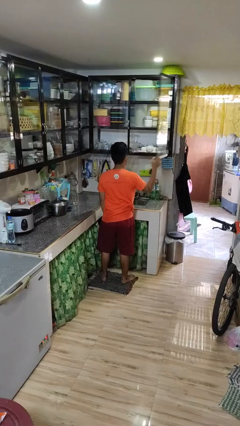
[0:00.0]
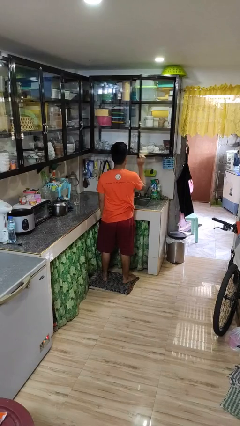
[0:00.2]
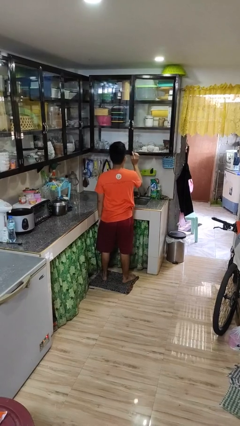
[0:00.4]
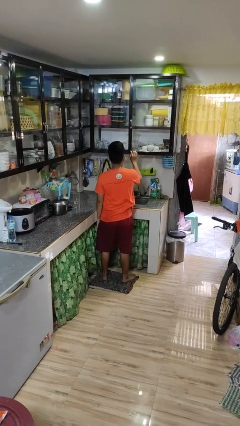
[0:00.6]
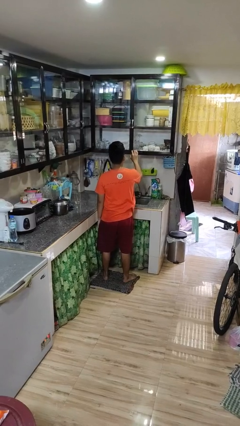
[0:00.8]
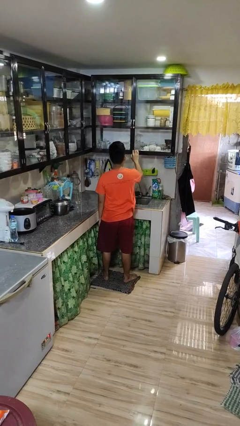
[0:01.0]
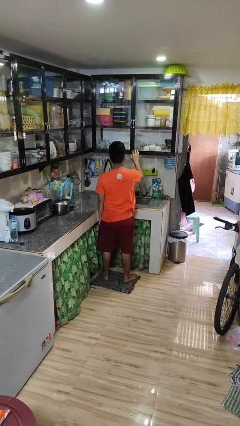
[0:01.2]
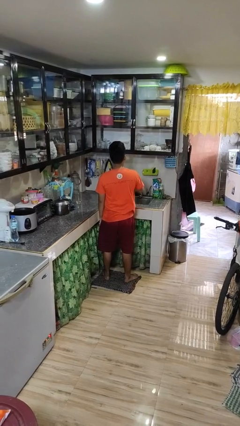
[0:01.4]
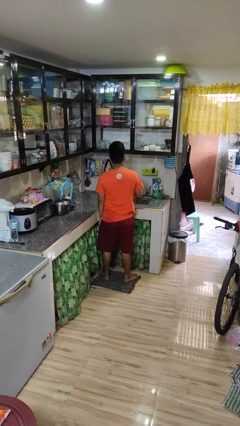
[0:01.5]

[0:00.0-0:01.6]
person closes cabinet

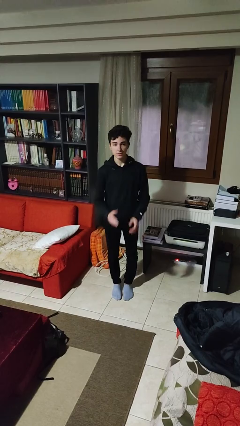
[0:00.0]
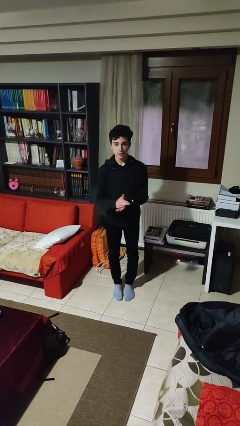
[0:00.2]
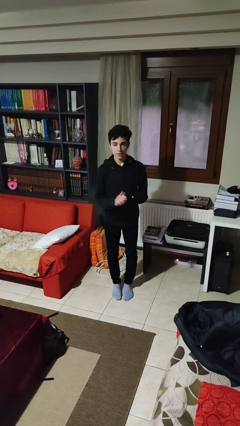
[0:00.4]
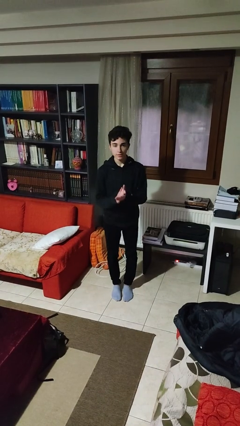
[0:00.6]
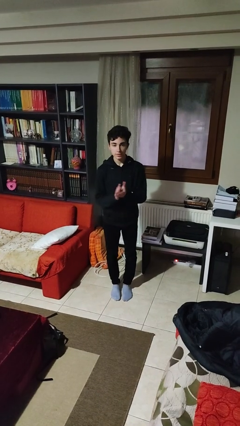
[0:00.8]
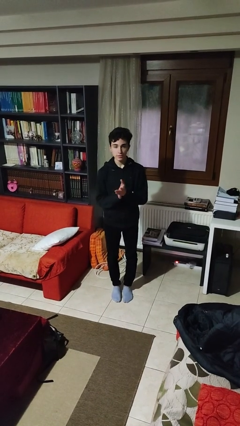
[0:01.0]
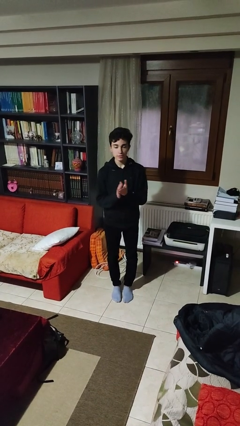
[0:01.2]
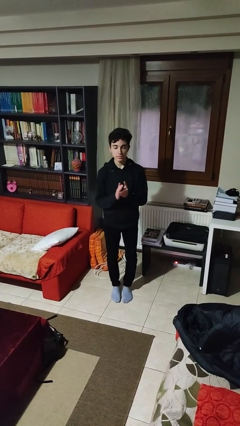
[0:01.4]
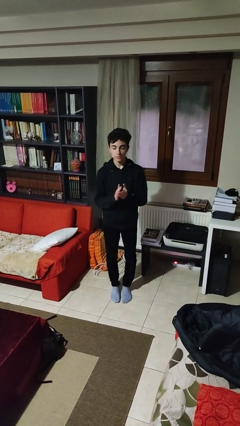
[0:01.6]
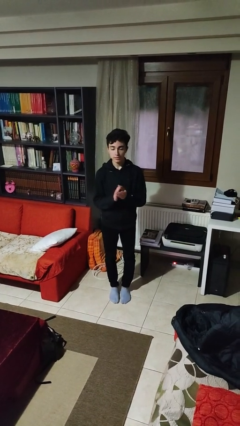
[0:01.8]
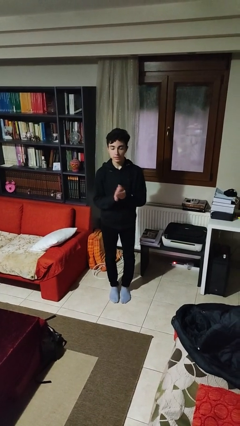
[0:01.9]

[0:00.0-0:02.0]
person claps hands

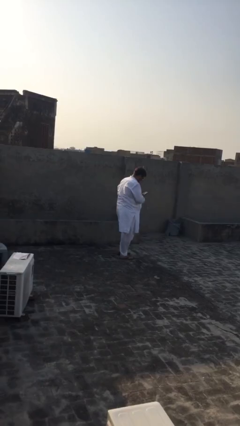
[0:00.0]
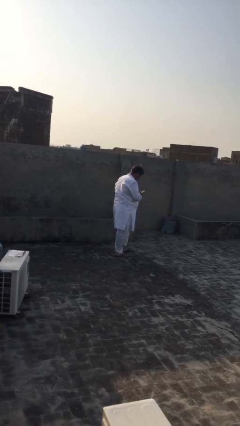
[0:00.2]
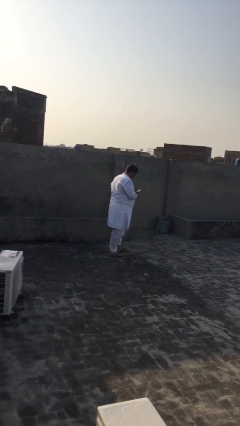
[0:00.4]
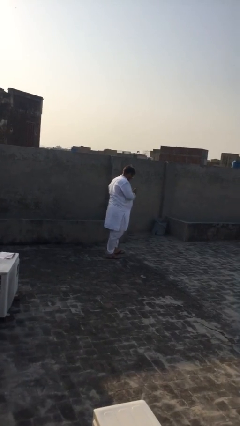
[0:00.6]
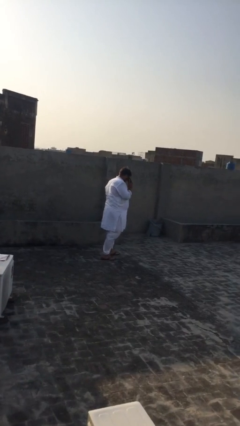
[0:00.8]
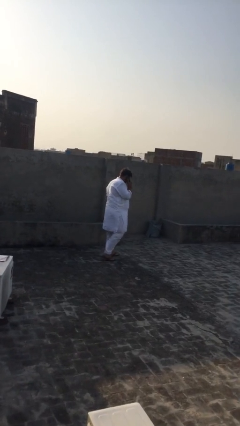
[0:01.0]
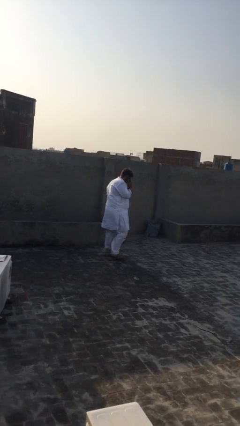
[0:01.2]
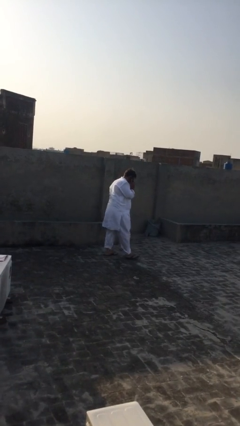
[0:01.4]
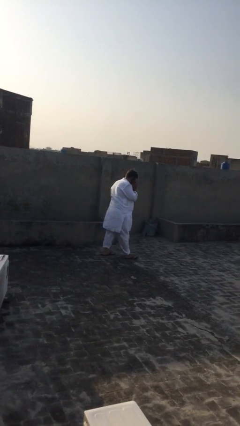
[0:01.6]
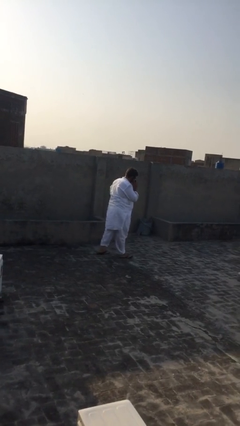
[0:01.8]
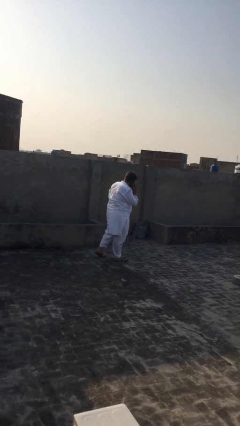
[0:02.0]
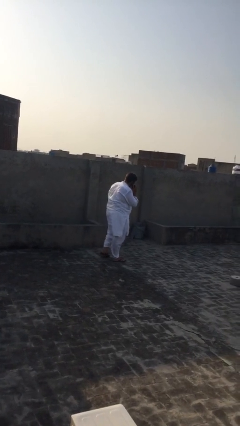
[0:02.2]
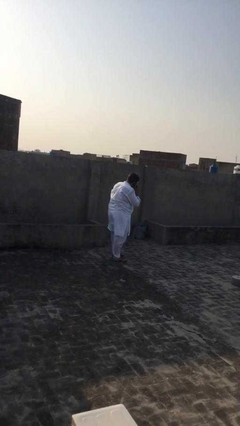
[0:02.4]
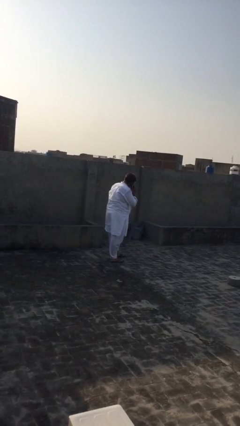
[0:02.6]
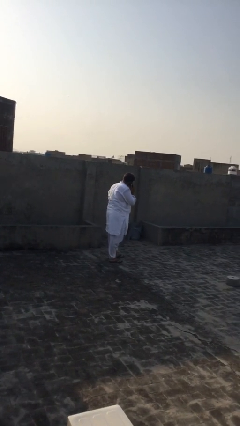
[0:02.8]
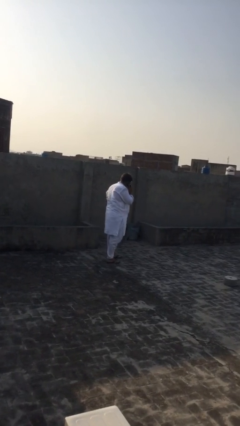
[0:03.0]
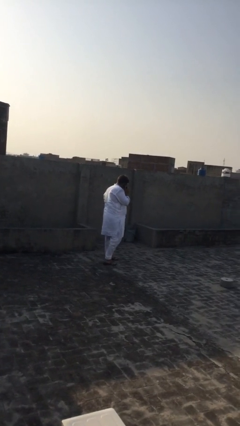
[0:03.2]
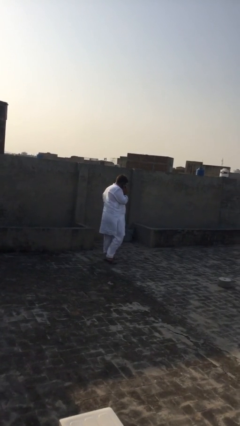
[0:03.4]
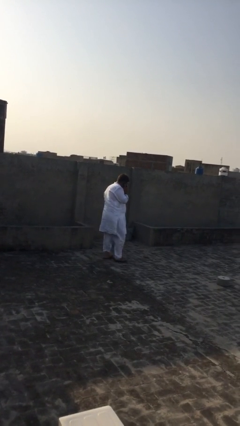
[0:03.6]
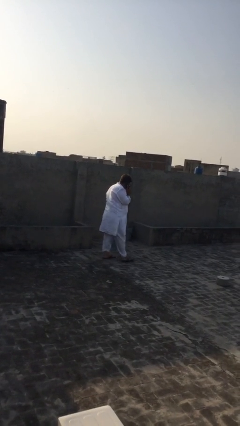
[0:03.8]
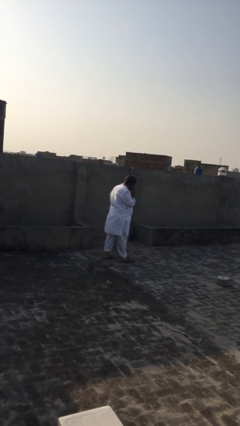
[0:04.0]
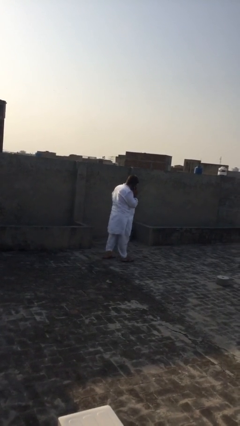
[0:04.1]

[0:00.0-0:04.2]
person talks on phone

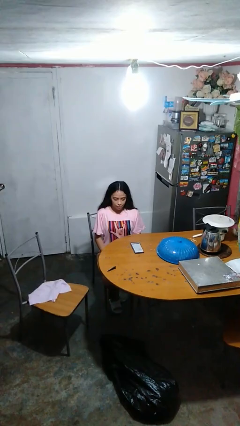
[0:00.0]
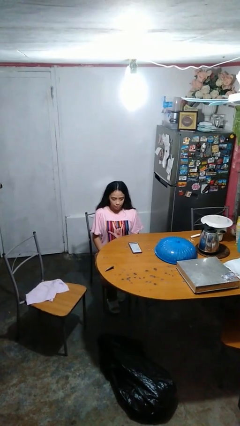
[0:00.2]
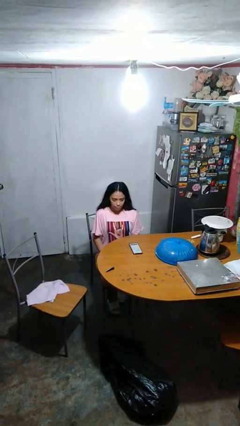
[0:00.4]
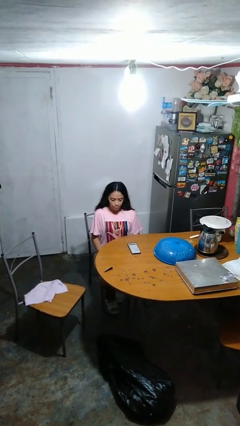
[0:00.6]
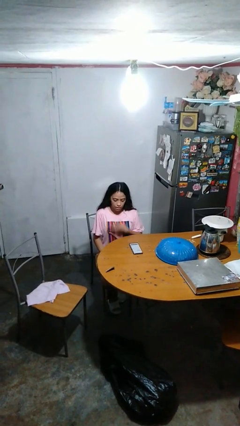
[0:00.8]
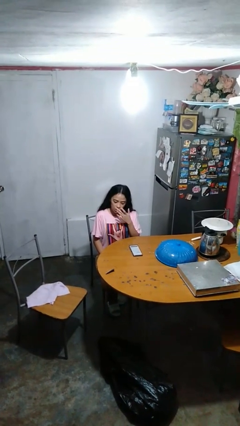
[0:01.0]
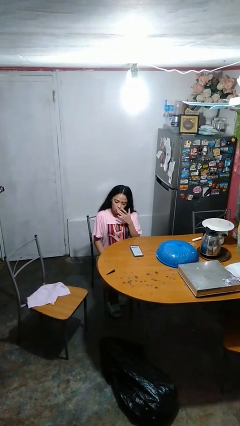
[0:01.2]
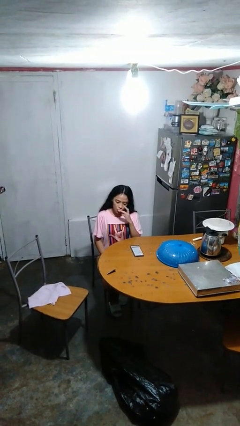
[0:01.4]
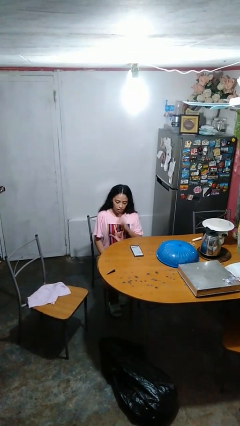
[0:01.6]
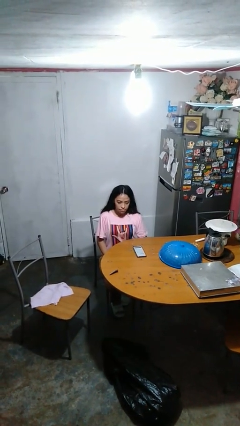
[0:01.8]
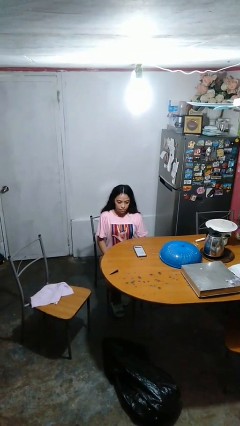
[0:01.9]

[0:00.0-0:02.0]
person licks fingers

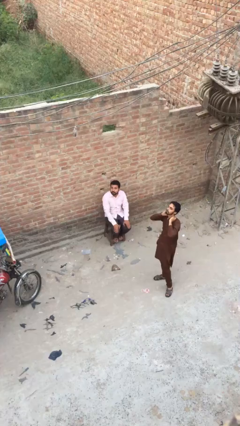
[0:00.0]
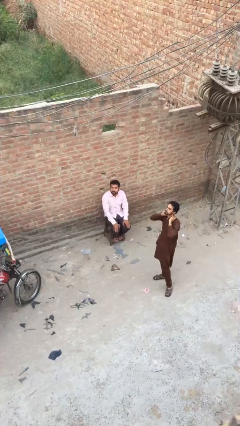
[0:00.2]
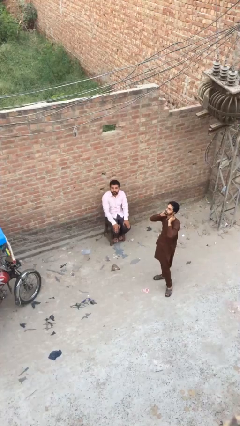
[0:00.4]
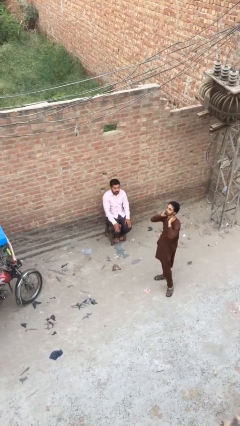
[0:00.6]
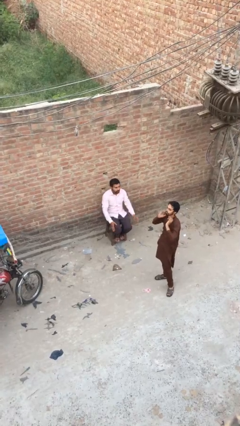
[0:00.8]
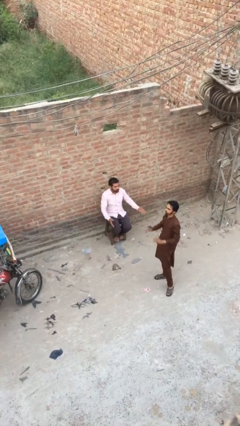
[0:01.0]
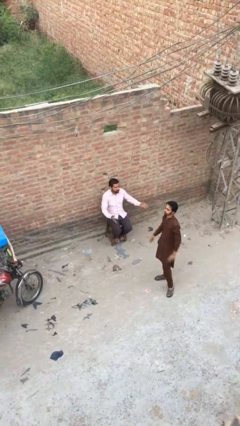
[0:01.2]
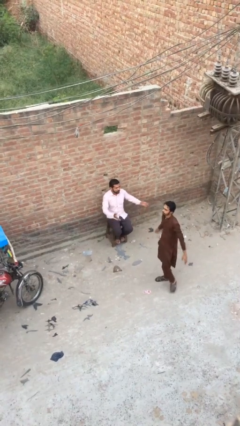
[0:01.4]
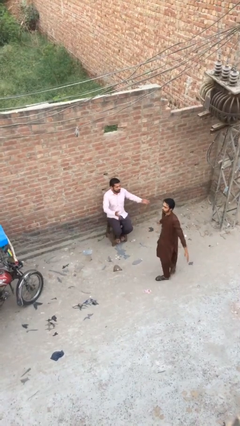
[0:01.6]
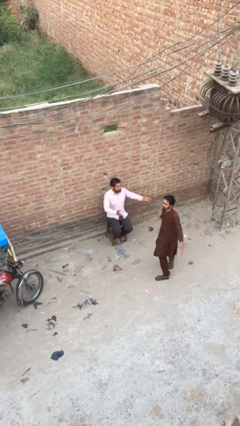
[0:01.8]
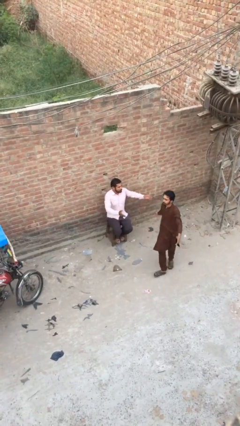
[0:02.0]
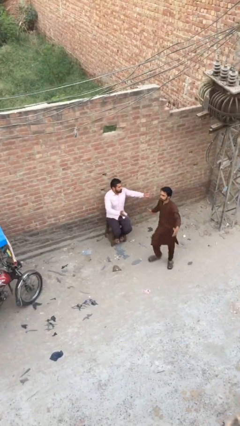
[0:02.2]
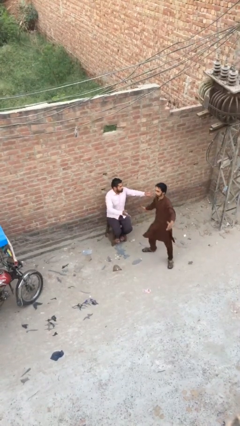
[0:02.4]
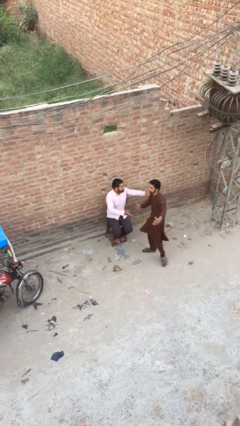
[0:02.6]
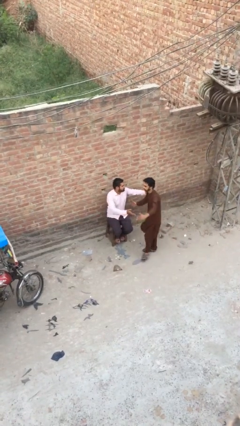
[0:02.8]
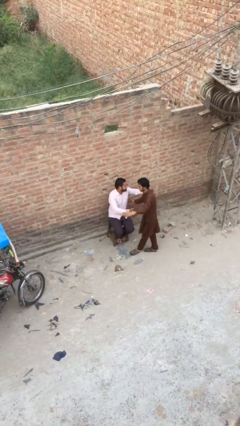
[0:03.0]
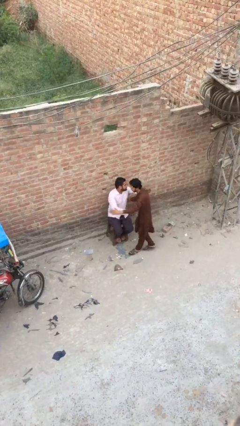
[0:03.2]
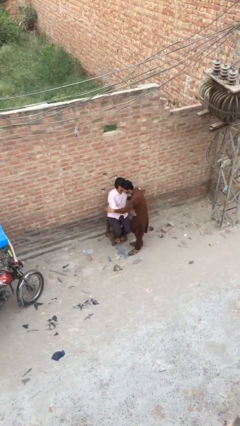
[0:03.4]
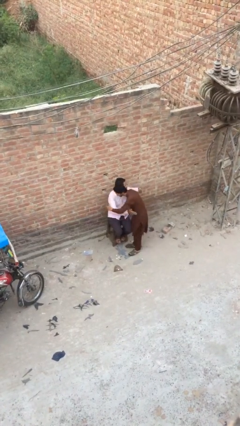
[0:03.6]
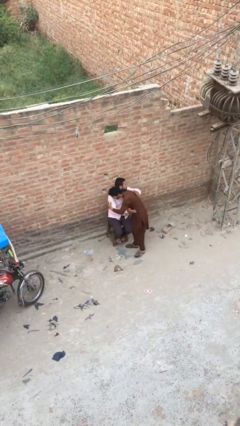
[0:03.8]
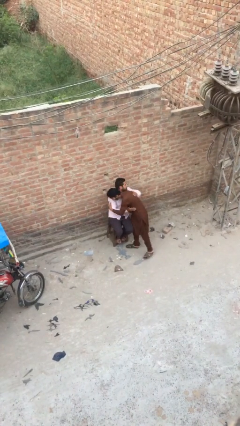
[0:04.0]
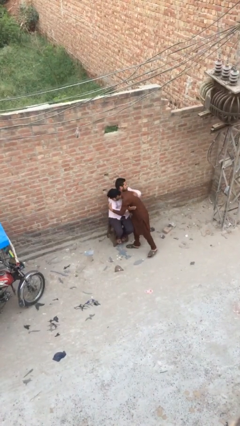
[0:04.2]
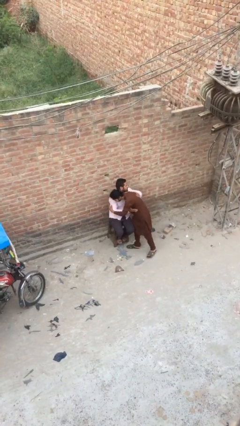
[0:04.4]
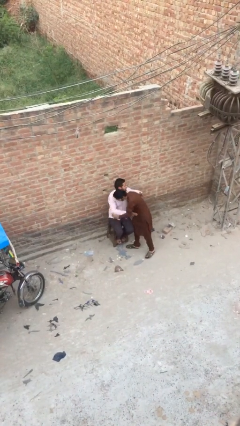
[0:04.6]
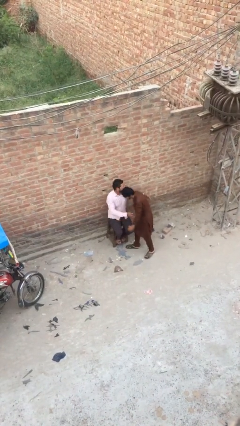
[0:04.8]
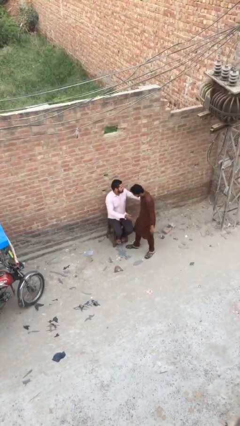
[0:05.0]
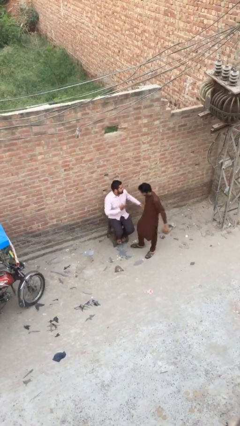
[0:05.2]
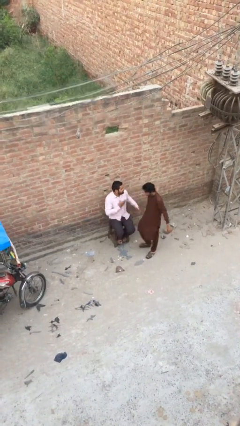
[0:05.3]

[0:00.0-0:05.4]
person embraces person

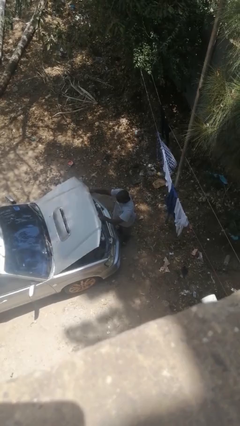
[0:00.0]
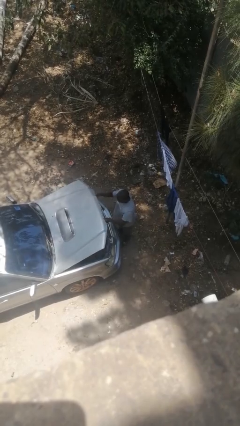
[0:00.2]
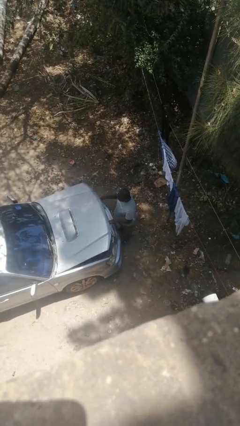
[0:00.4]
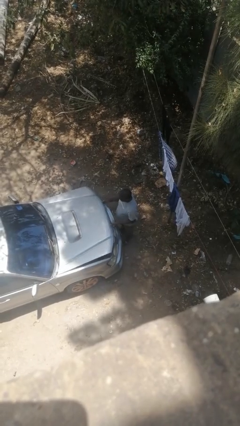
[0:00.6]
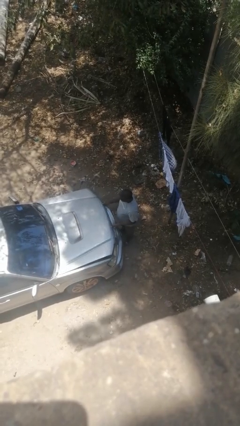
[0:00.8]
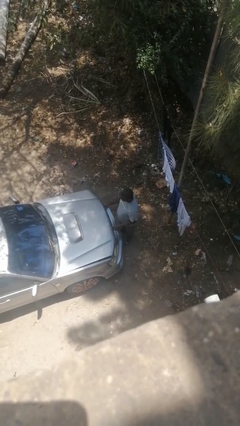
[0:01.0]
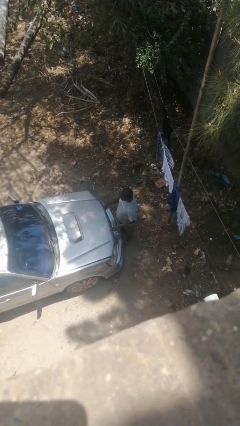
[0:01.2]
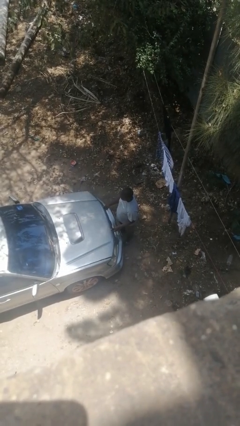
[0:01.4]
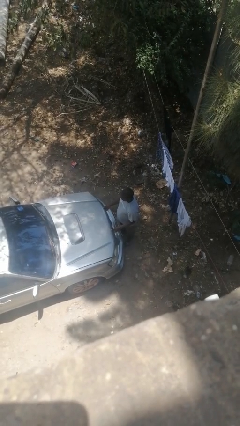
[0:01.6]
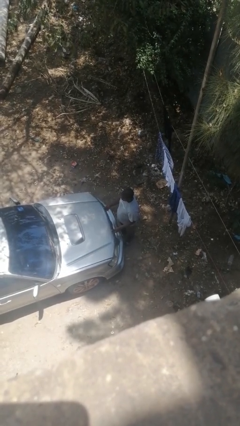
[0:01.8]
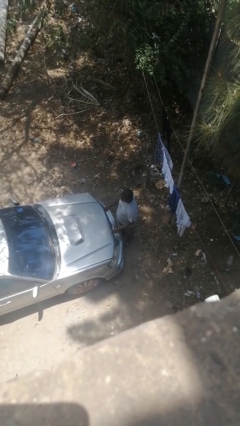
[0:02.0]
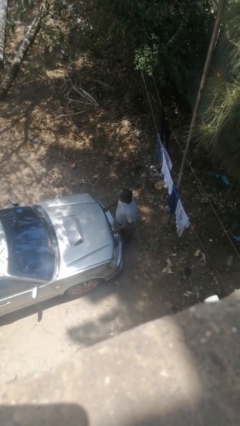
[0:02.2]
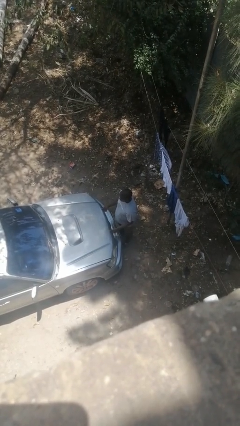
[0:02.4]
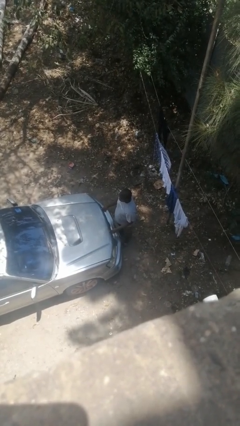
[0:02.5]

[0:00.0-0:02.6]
person closes car hood
